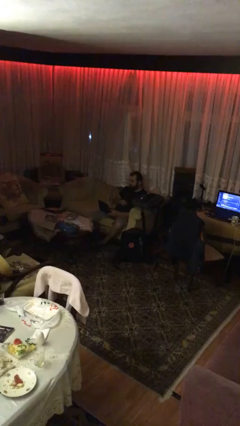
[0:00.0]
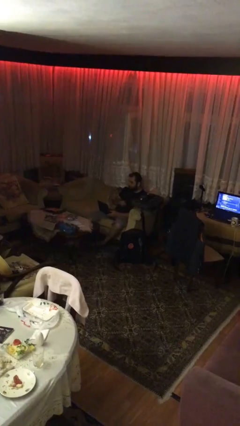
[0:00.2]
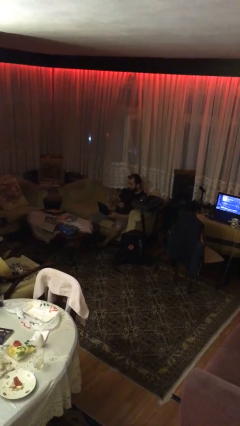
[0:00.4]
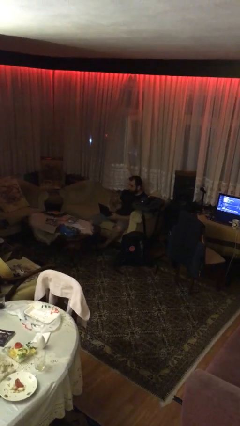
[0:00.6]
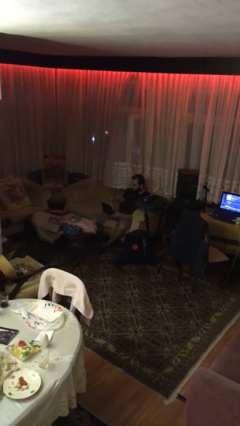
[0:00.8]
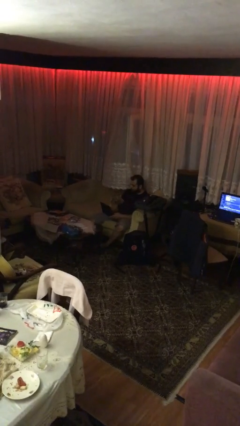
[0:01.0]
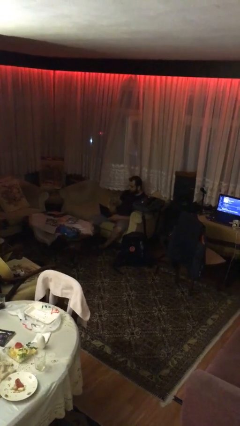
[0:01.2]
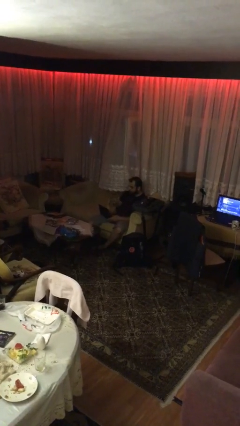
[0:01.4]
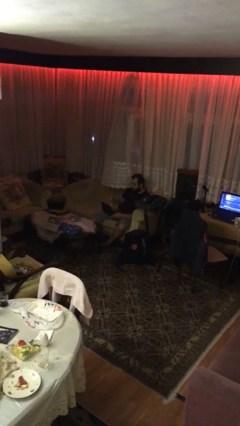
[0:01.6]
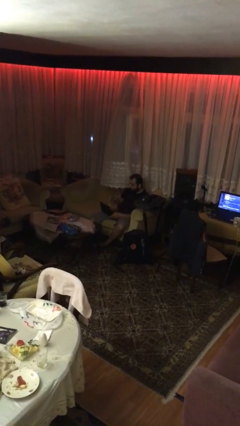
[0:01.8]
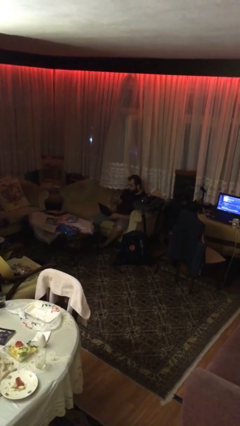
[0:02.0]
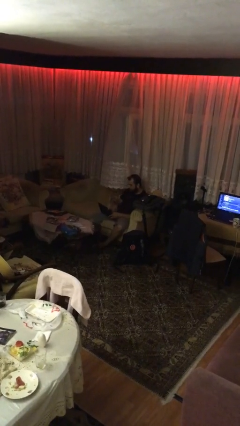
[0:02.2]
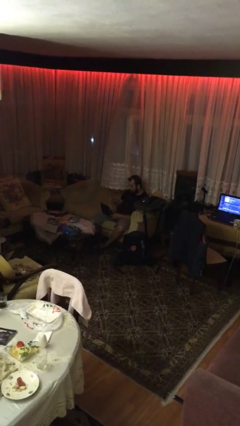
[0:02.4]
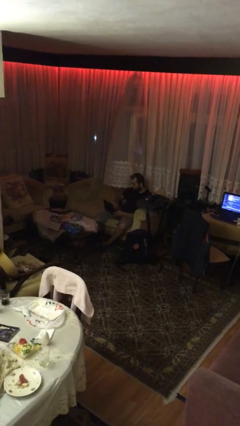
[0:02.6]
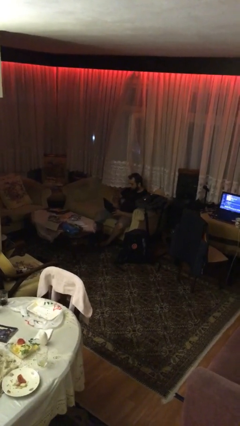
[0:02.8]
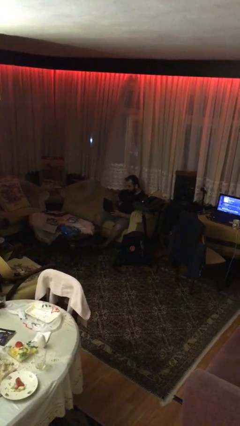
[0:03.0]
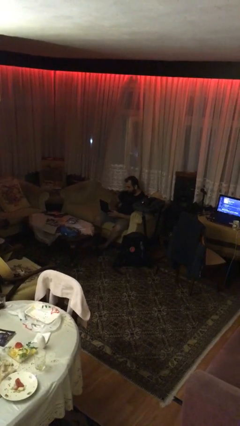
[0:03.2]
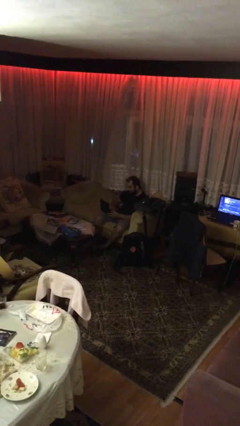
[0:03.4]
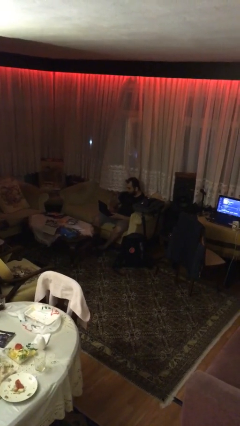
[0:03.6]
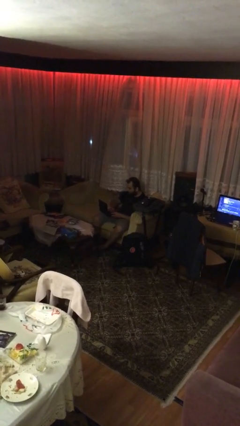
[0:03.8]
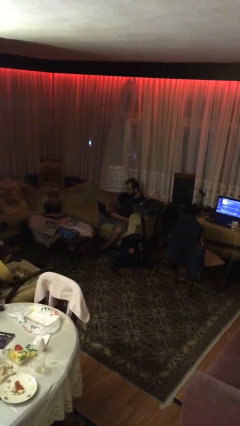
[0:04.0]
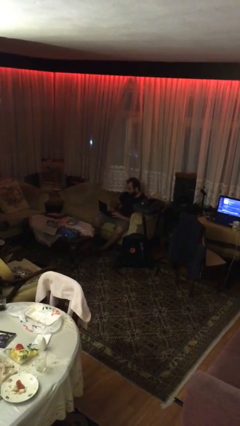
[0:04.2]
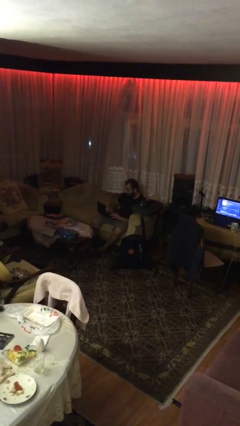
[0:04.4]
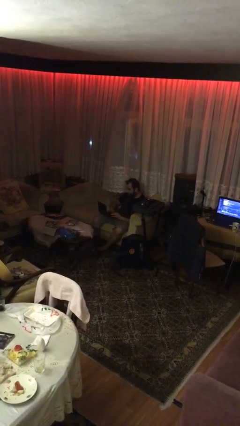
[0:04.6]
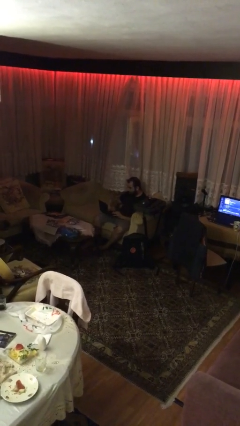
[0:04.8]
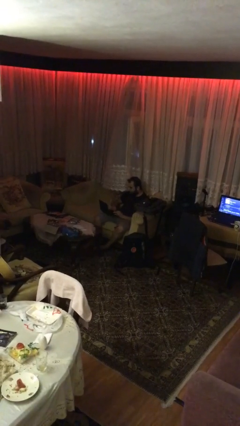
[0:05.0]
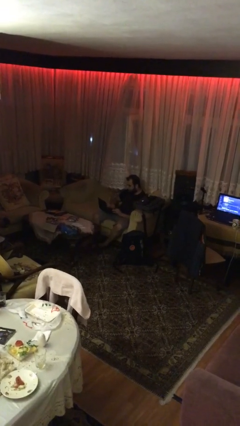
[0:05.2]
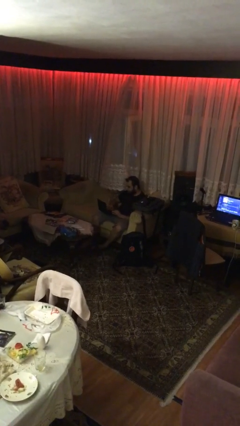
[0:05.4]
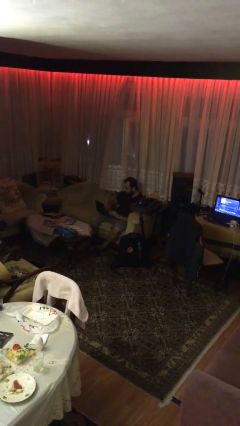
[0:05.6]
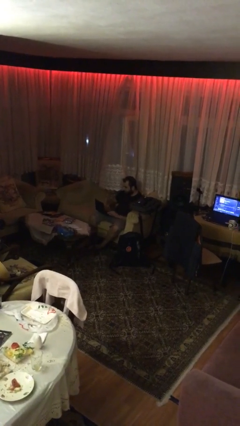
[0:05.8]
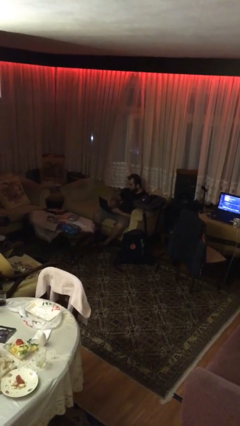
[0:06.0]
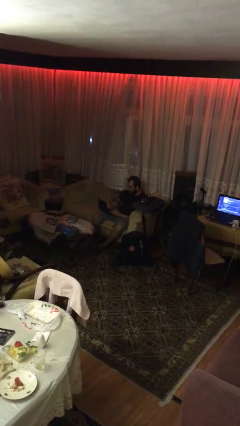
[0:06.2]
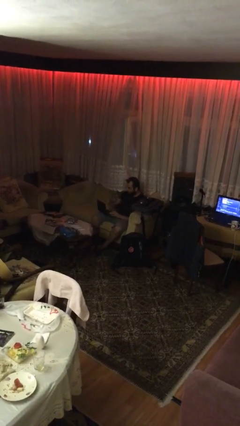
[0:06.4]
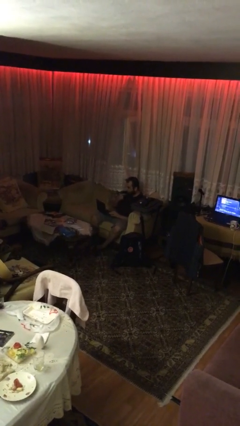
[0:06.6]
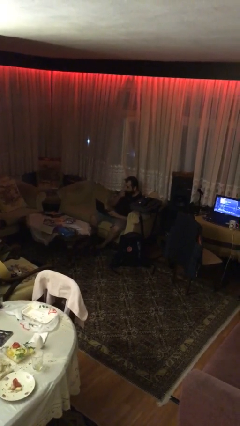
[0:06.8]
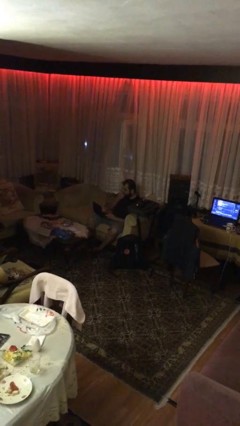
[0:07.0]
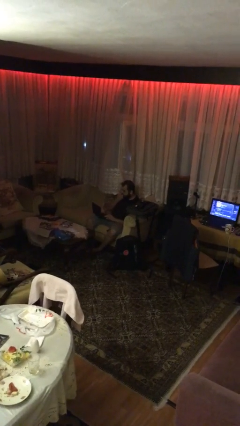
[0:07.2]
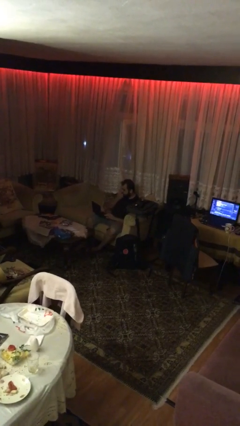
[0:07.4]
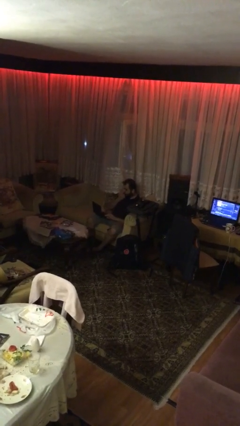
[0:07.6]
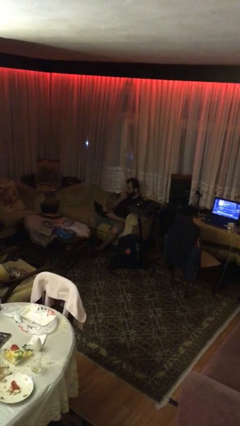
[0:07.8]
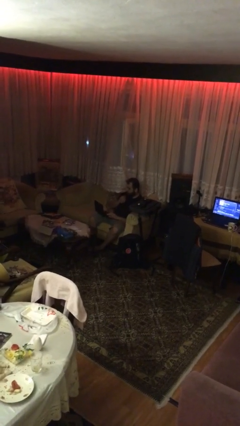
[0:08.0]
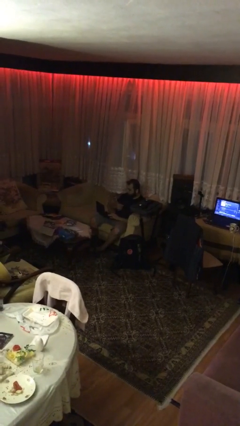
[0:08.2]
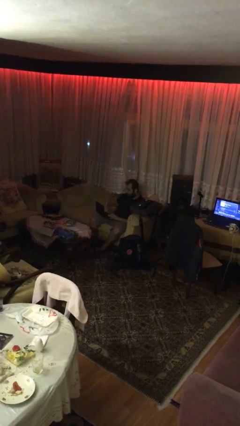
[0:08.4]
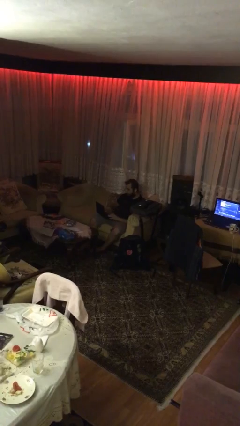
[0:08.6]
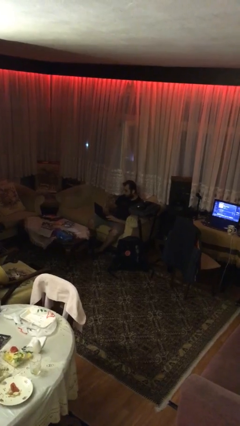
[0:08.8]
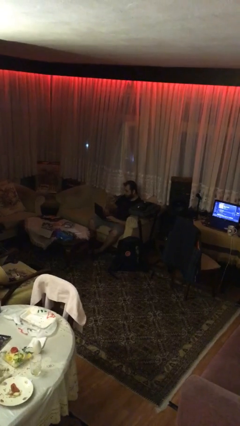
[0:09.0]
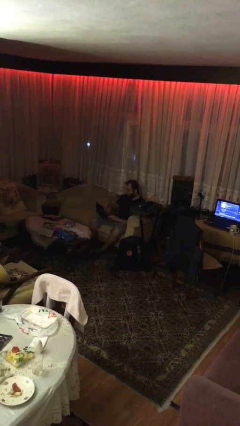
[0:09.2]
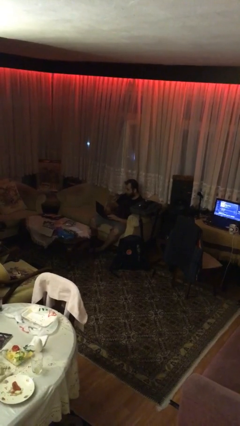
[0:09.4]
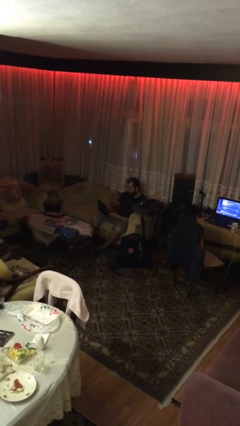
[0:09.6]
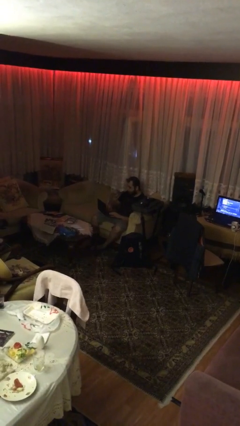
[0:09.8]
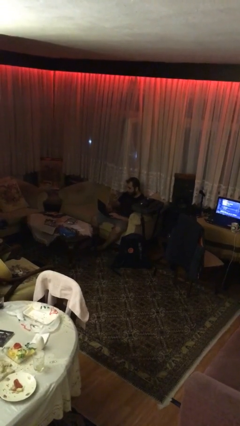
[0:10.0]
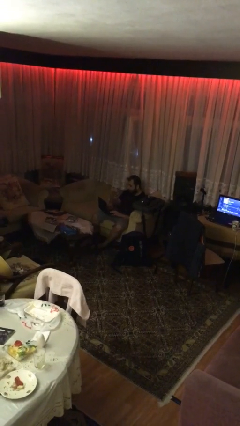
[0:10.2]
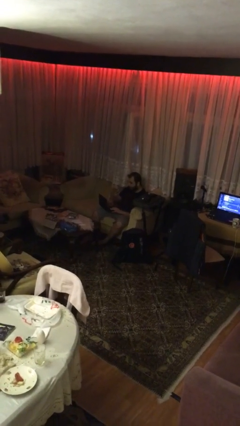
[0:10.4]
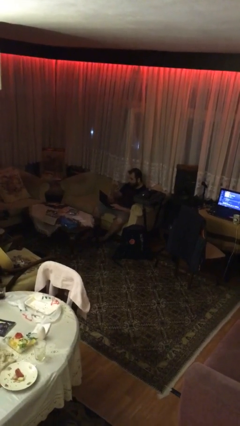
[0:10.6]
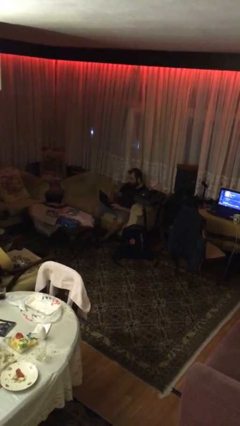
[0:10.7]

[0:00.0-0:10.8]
person interacts with laptop

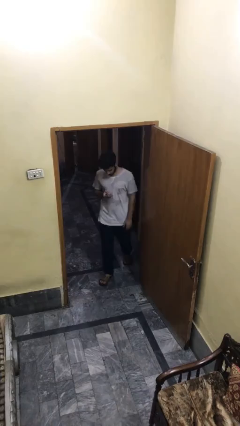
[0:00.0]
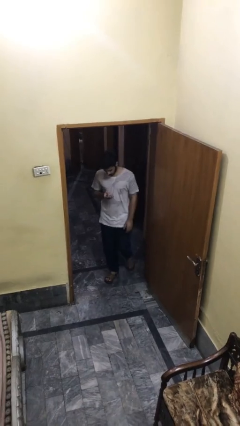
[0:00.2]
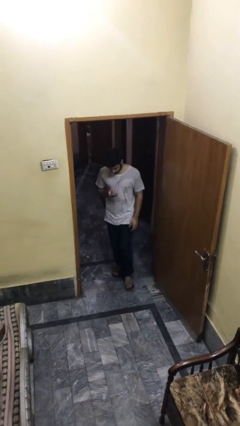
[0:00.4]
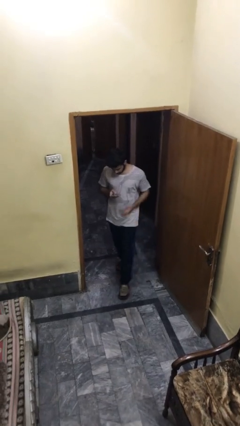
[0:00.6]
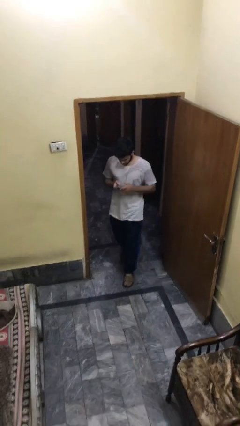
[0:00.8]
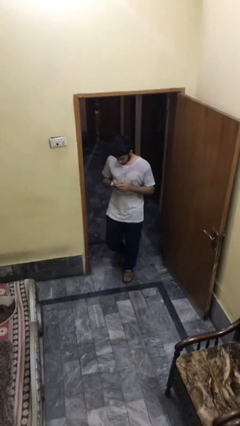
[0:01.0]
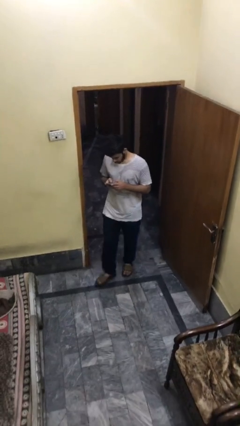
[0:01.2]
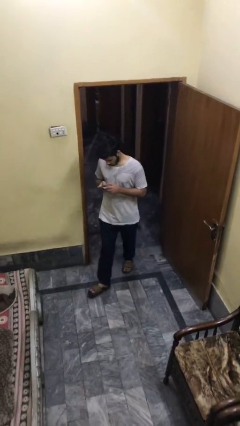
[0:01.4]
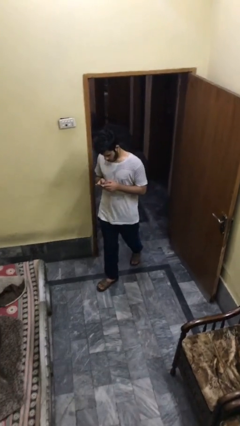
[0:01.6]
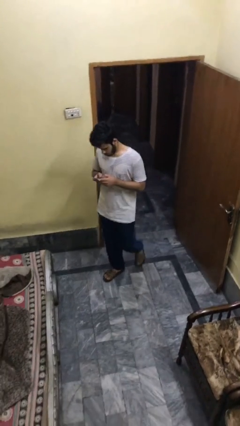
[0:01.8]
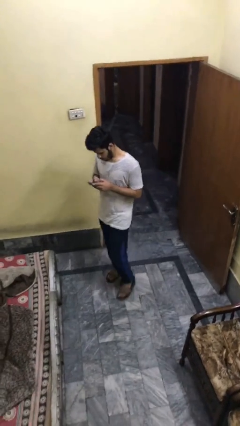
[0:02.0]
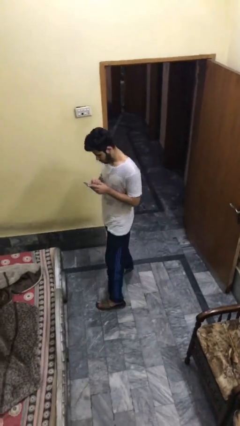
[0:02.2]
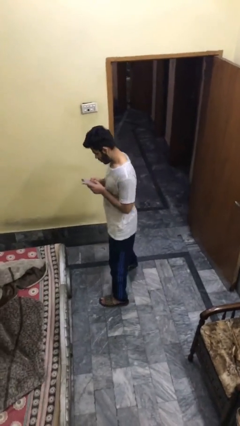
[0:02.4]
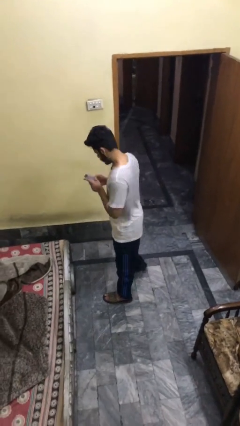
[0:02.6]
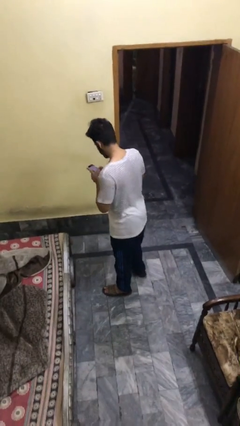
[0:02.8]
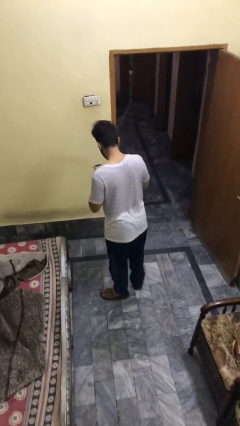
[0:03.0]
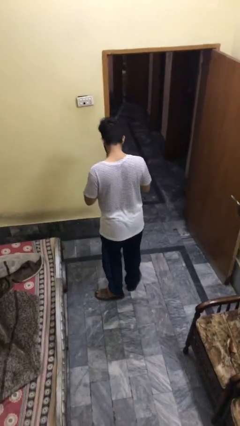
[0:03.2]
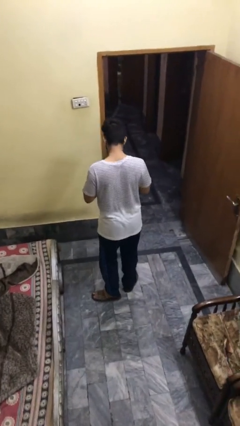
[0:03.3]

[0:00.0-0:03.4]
person enters scene through structure

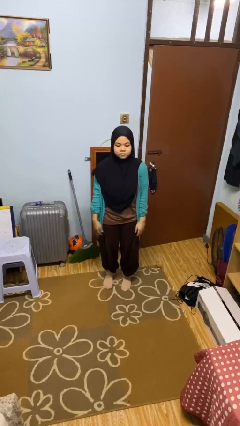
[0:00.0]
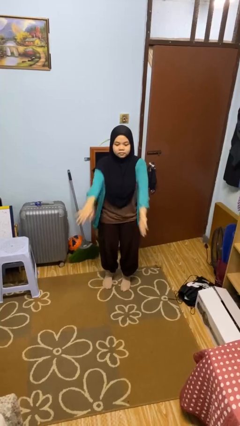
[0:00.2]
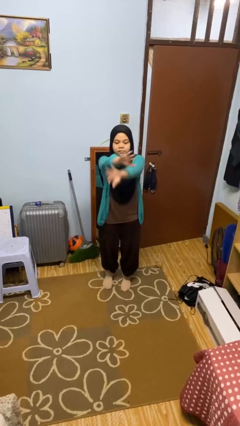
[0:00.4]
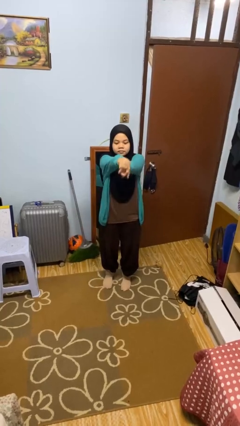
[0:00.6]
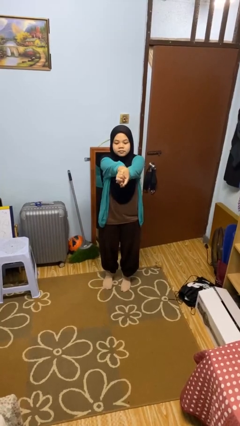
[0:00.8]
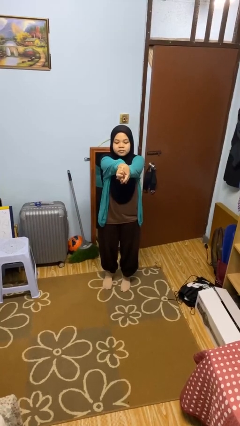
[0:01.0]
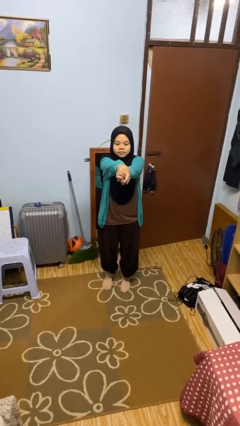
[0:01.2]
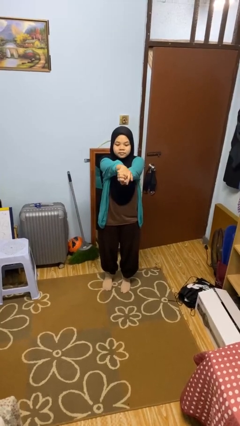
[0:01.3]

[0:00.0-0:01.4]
person crosses arms

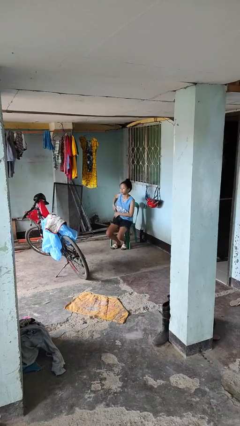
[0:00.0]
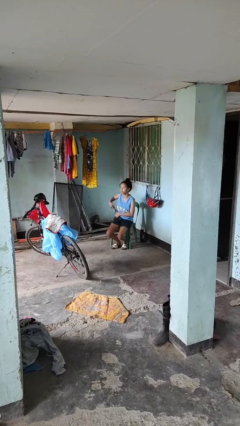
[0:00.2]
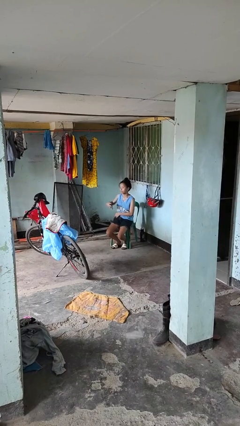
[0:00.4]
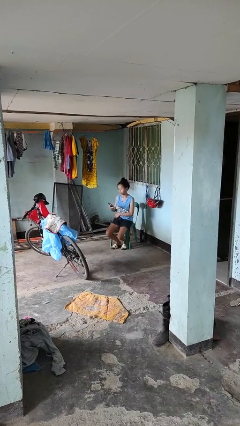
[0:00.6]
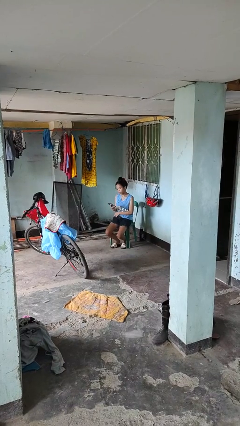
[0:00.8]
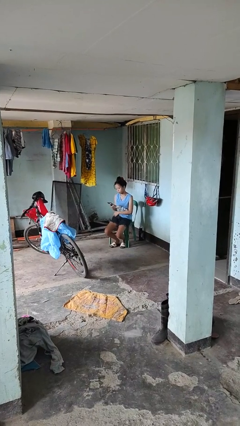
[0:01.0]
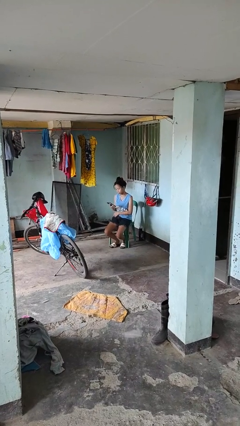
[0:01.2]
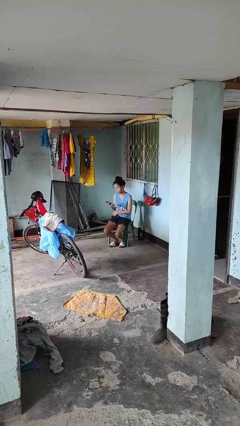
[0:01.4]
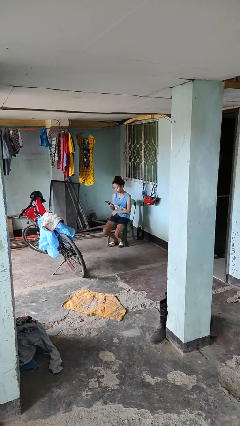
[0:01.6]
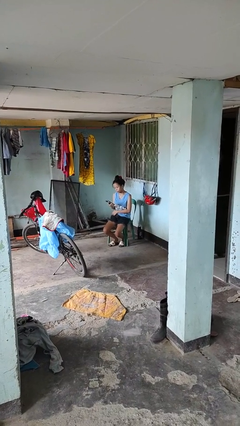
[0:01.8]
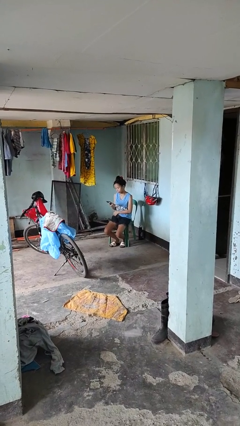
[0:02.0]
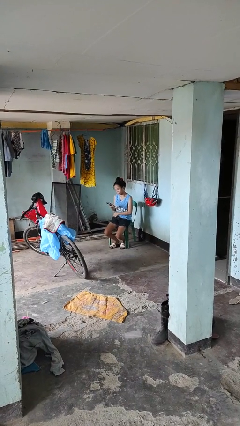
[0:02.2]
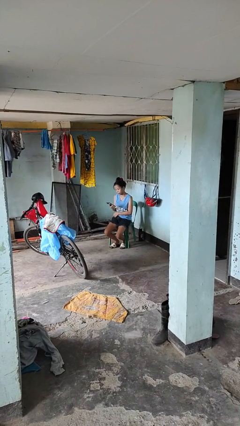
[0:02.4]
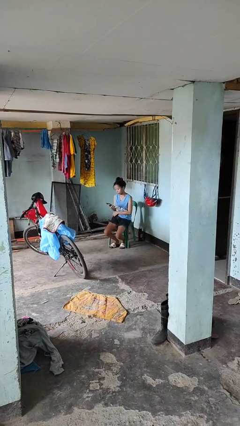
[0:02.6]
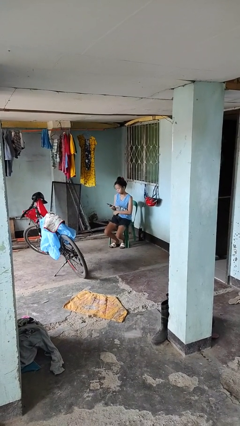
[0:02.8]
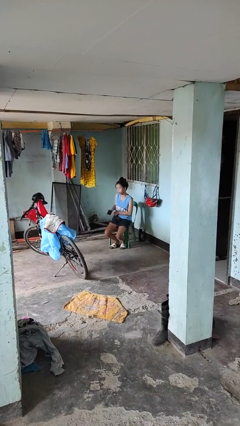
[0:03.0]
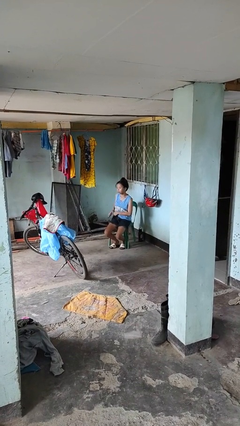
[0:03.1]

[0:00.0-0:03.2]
person takes phone from pocket
